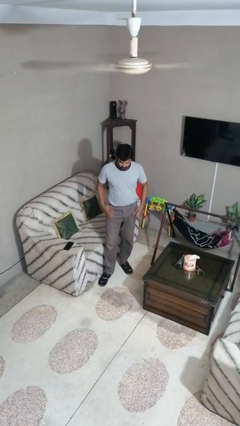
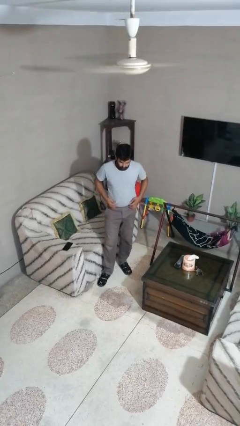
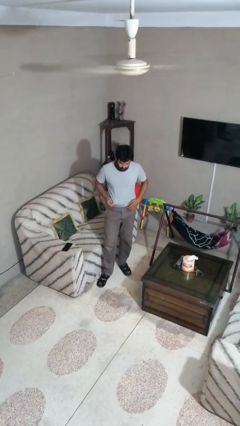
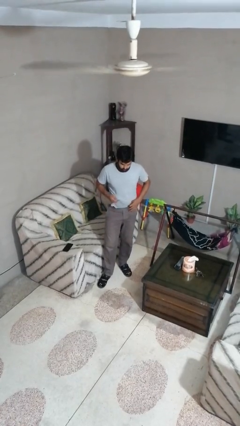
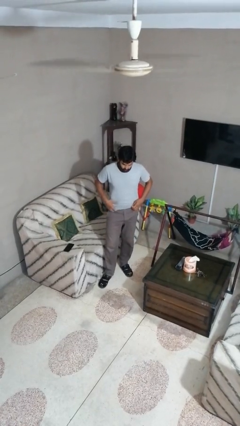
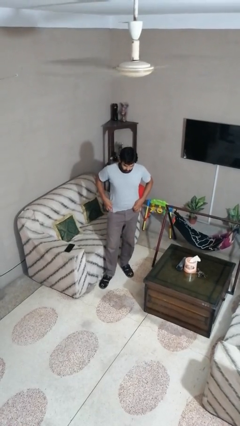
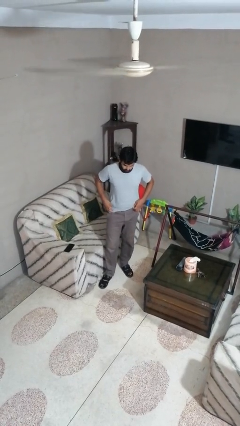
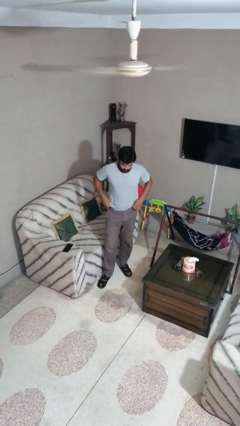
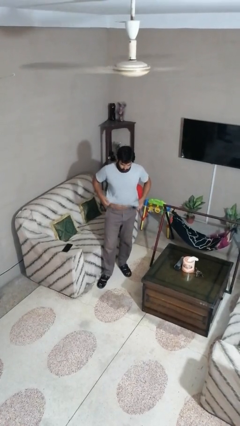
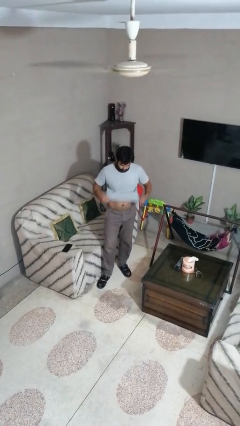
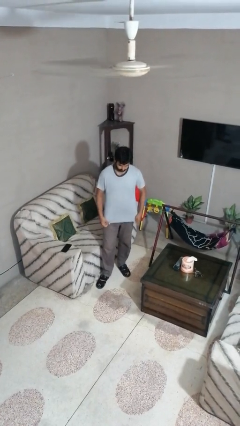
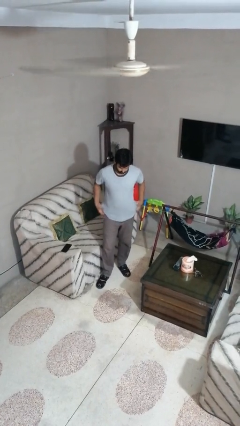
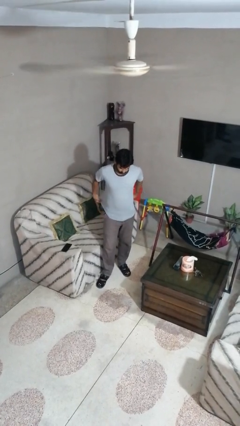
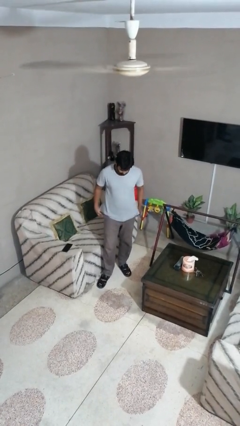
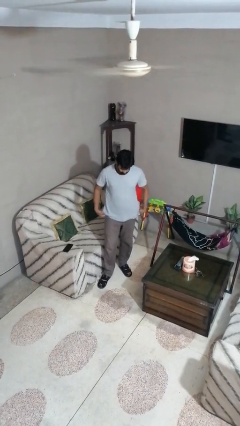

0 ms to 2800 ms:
person untucks shirt

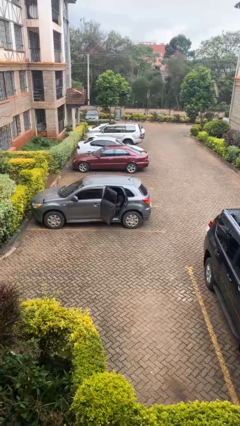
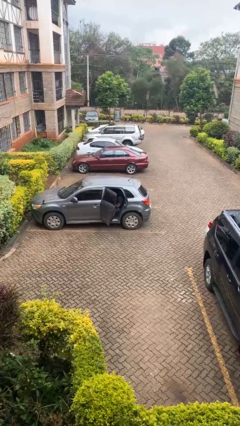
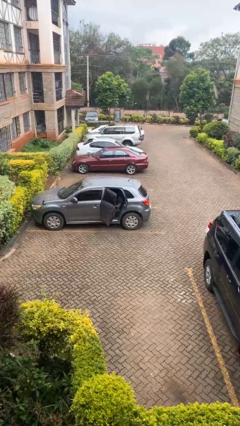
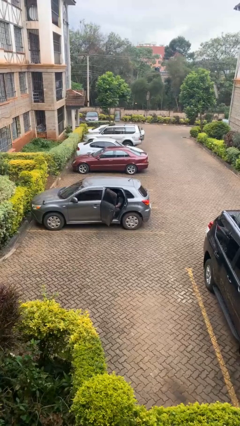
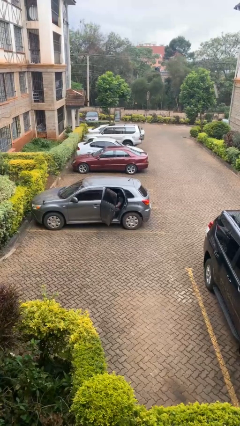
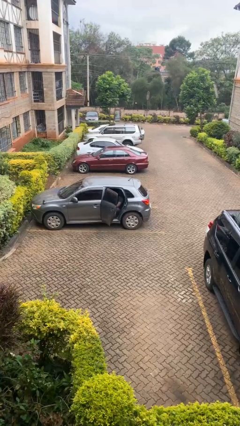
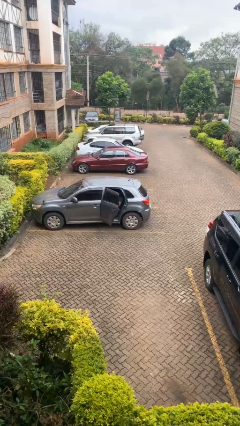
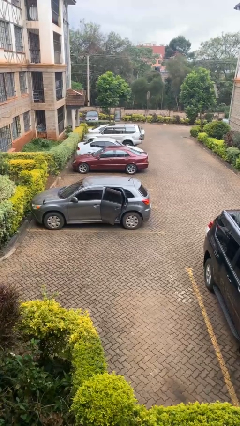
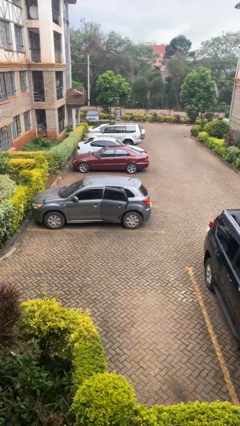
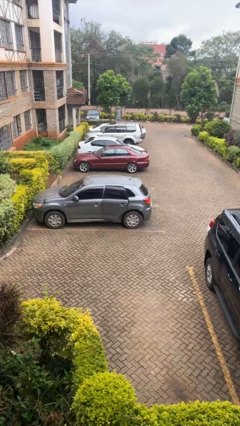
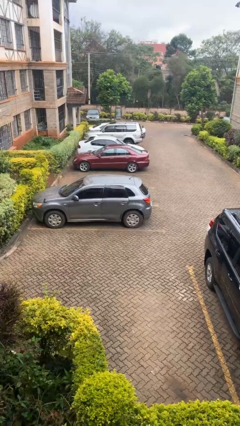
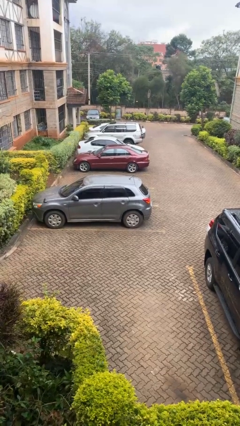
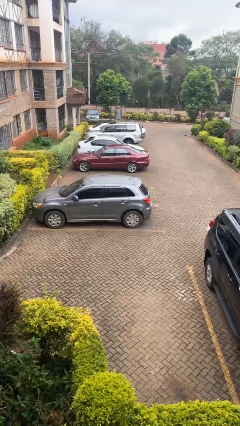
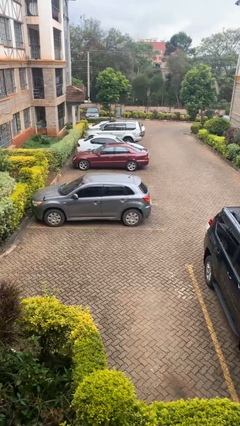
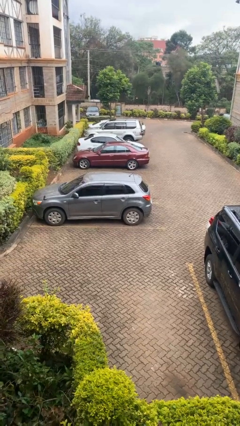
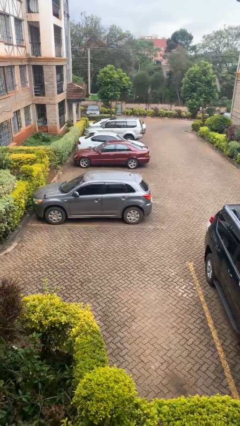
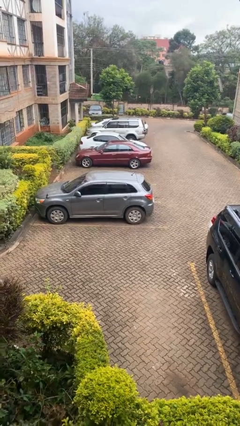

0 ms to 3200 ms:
person closes car door

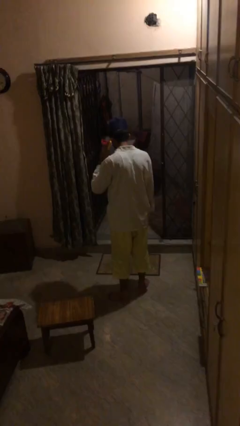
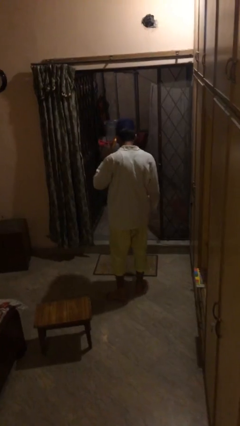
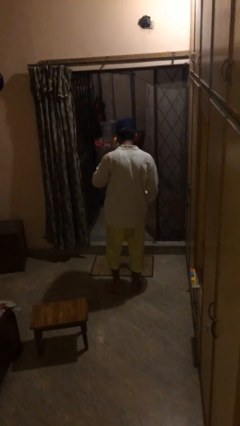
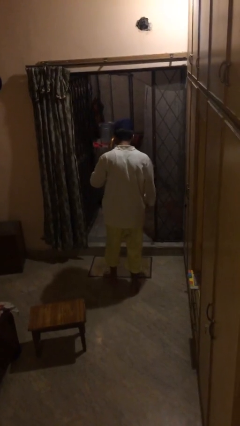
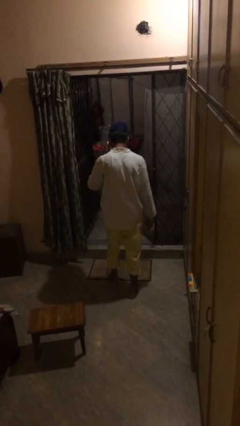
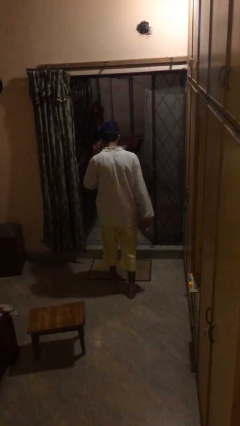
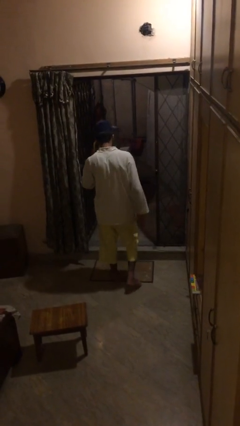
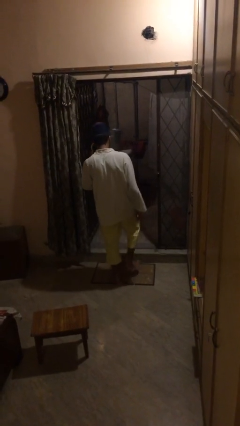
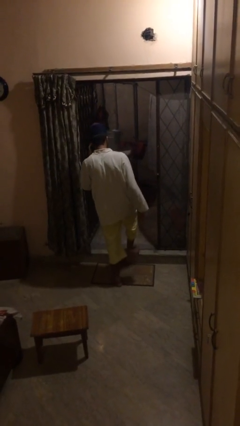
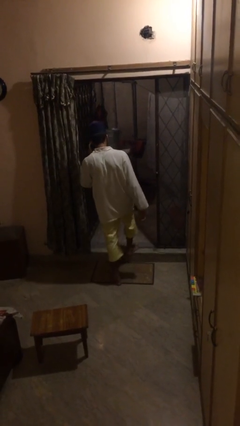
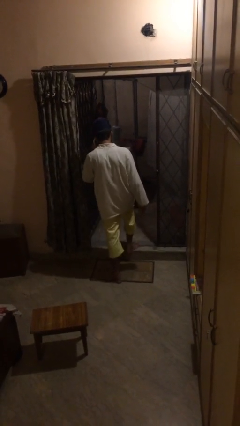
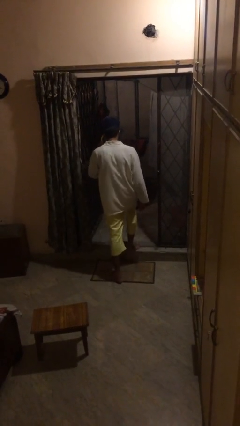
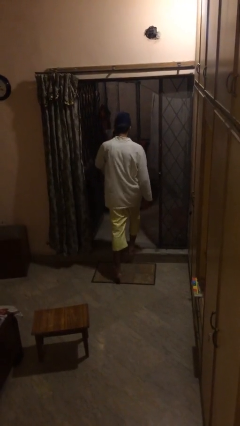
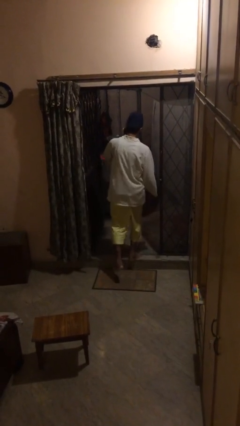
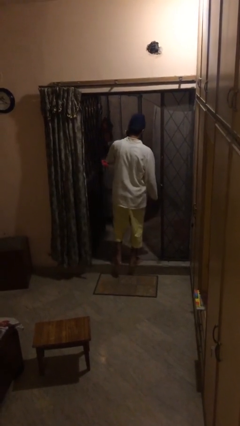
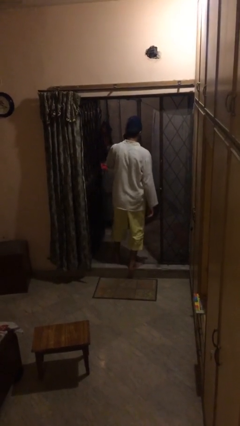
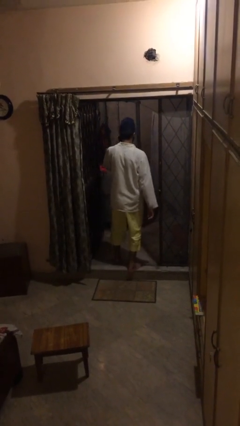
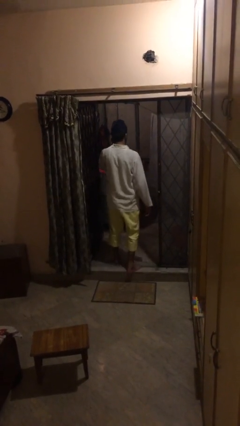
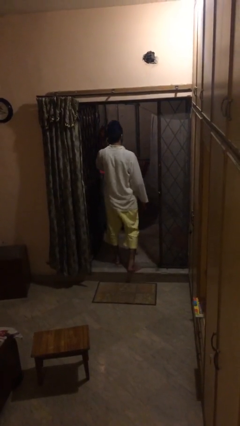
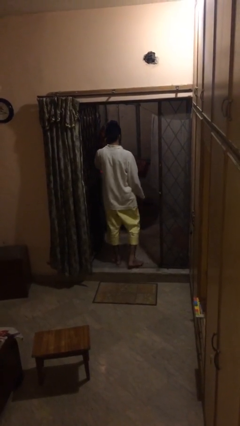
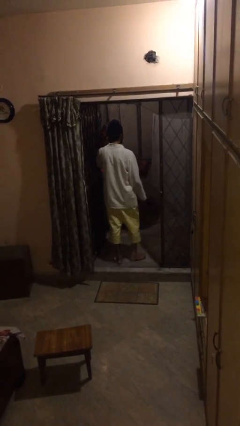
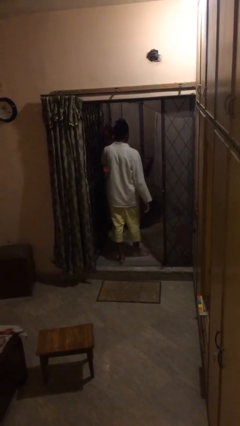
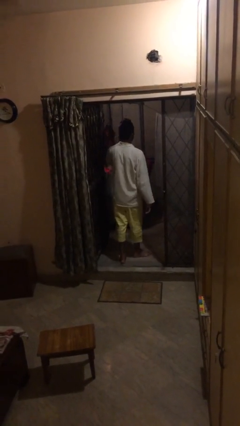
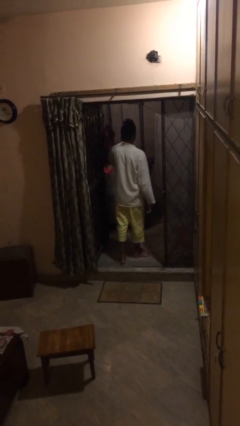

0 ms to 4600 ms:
person exits scene through structure

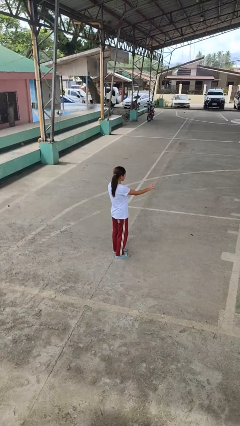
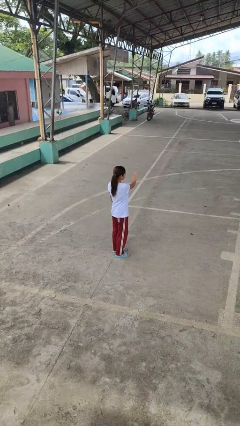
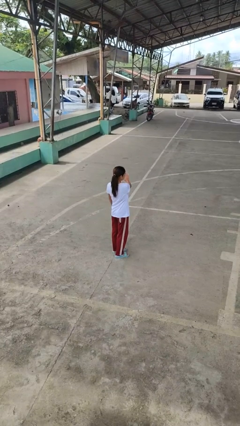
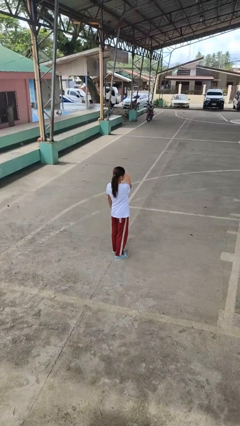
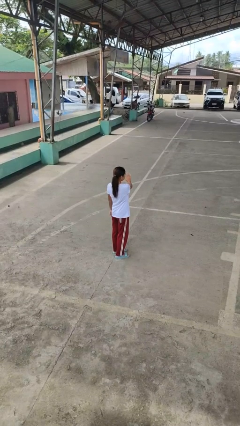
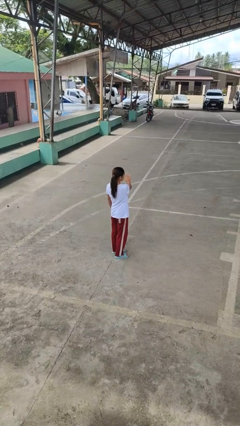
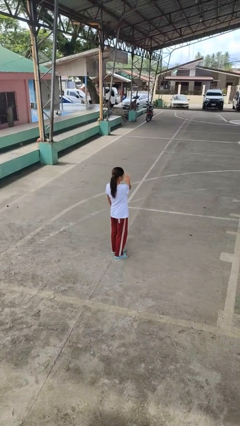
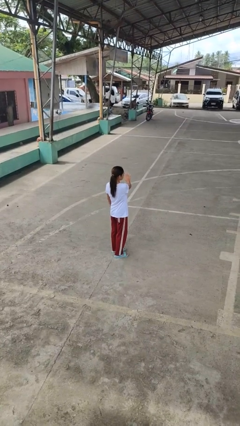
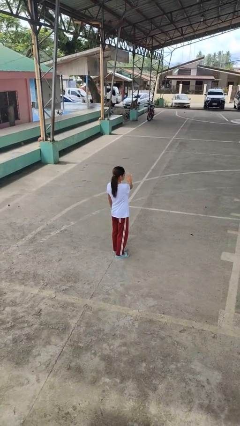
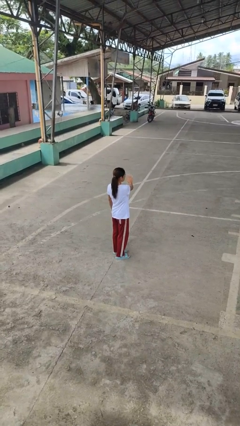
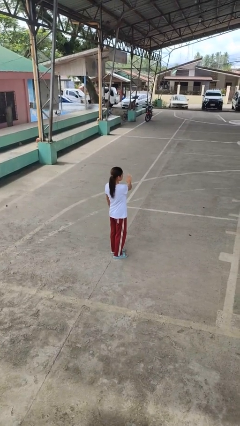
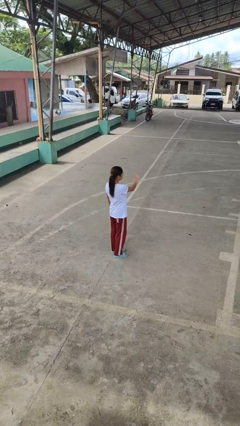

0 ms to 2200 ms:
person gestures swipe left

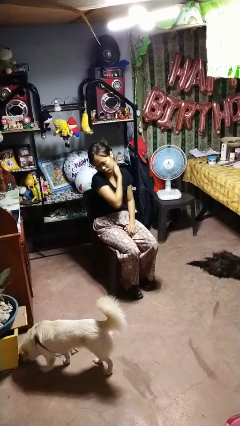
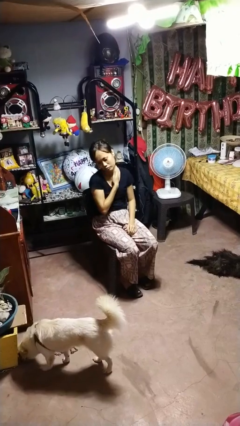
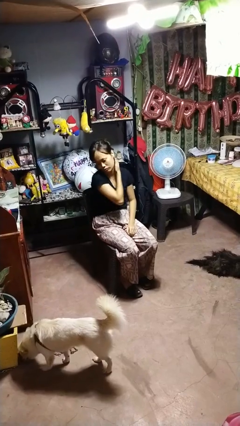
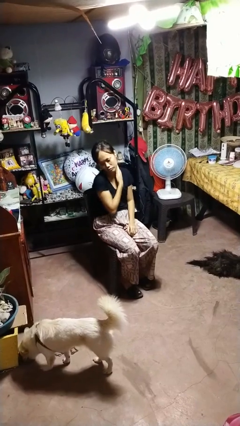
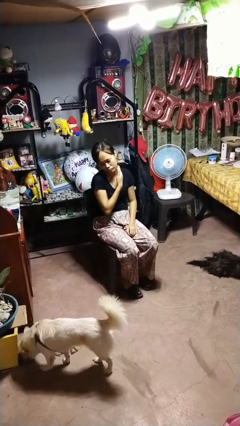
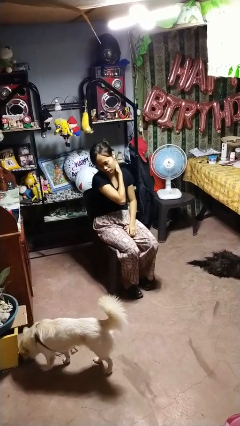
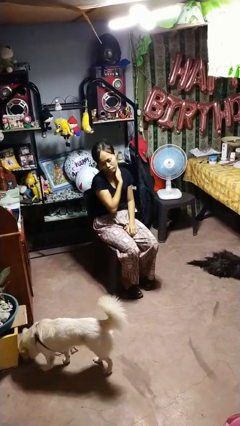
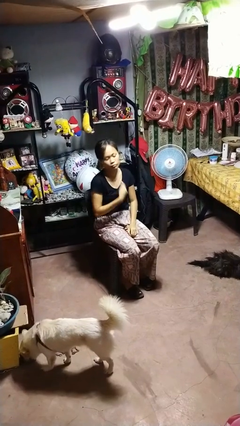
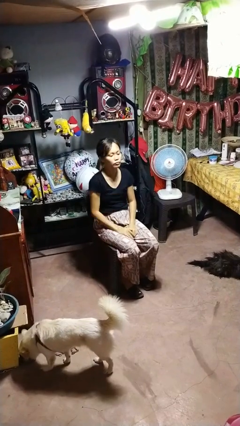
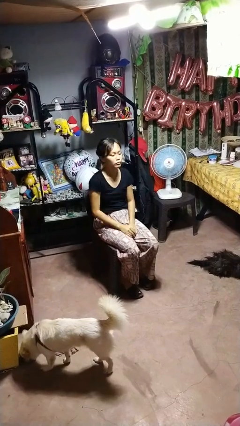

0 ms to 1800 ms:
person rubs neck

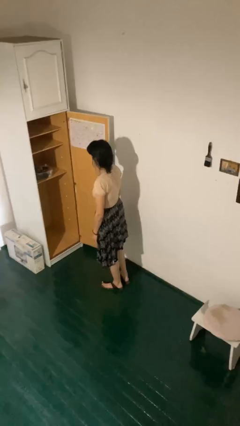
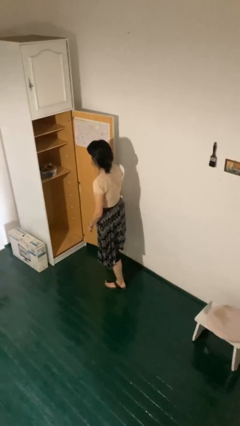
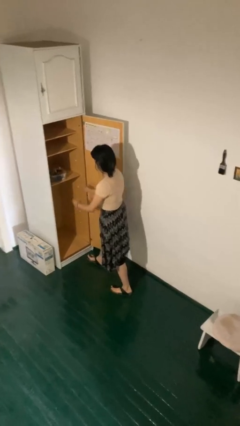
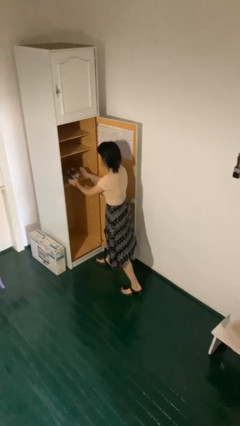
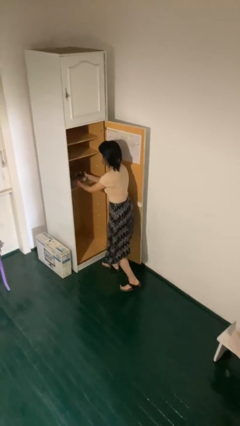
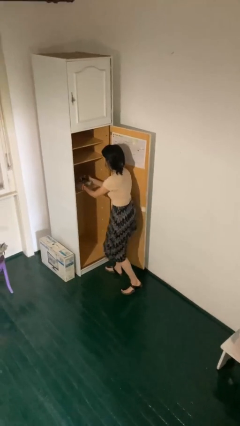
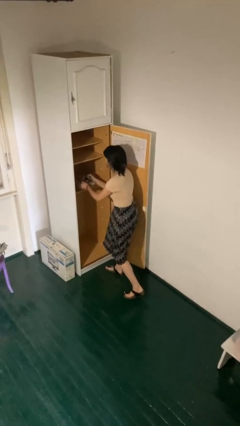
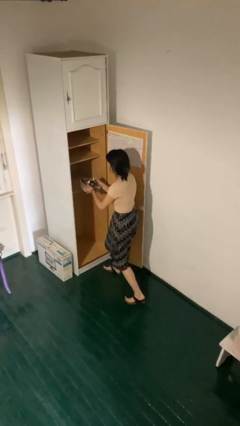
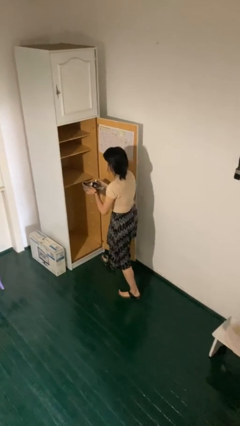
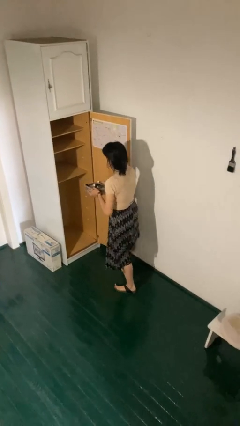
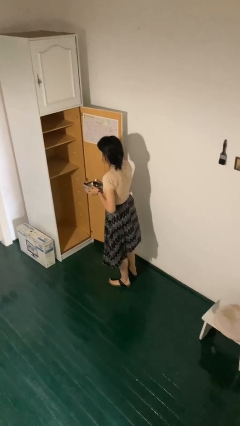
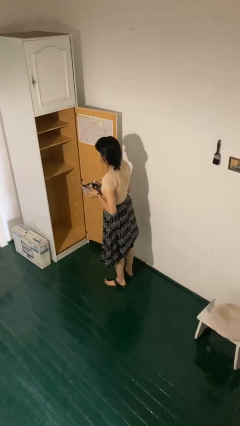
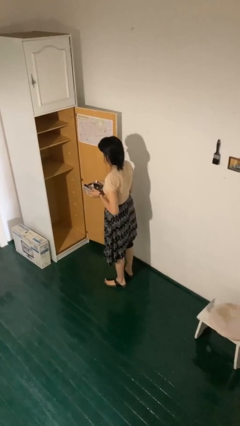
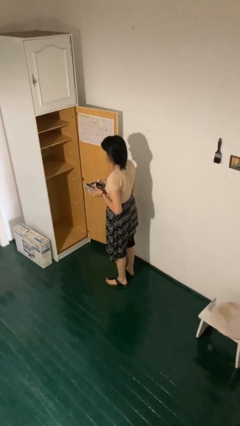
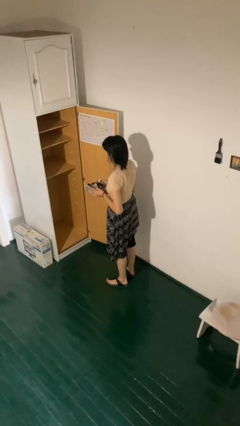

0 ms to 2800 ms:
person picks up object from cabinet
